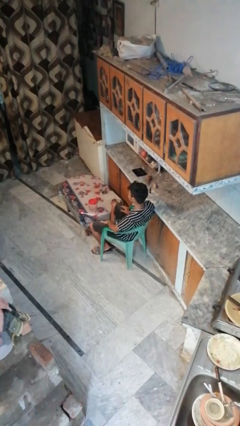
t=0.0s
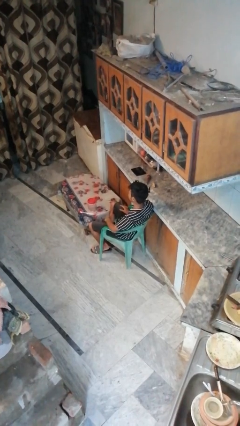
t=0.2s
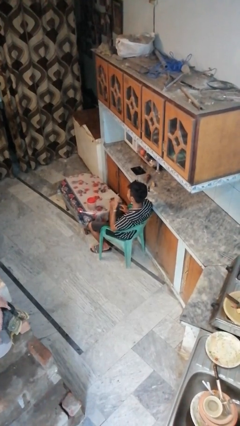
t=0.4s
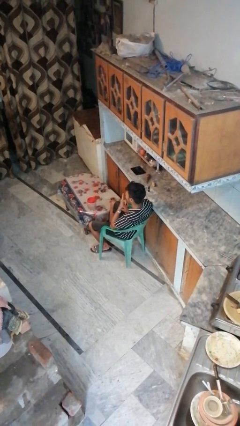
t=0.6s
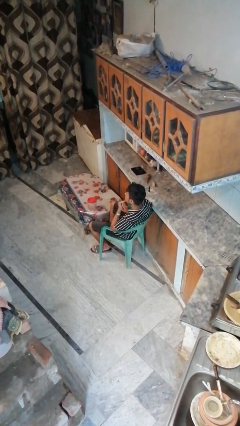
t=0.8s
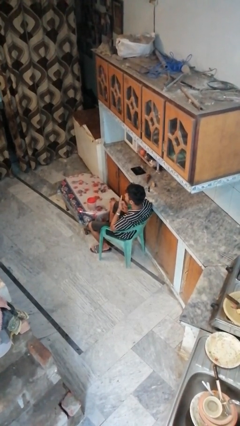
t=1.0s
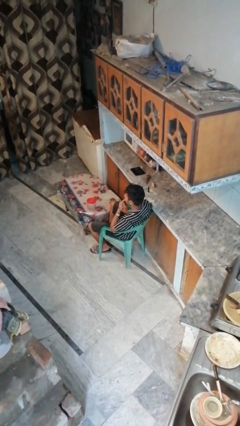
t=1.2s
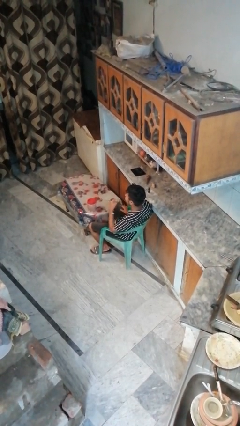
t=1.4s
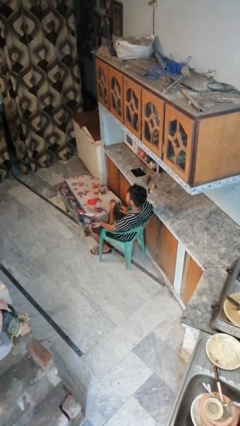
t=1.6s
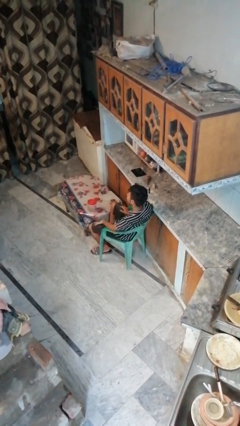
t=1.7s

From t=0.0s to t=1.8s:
person licks fingers

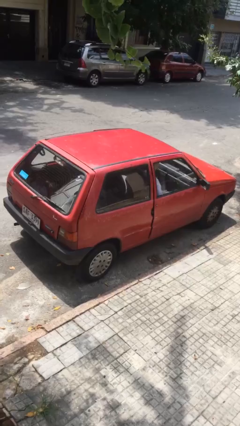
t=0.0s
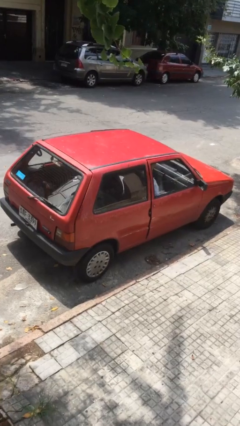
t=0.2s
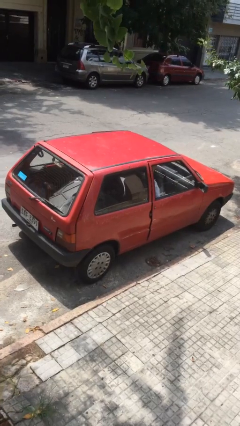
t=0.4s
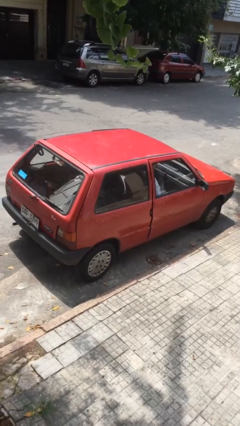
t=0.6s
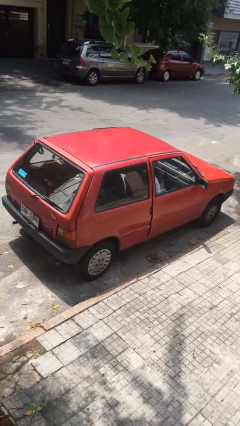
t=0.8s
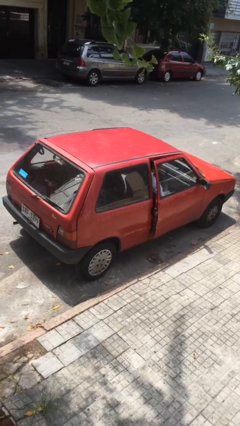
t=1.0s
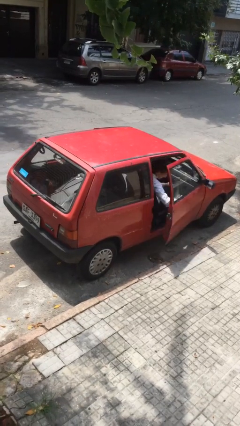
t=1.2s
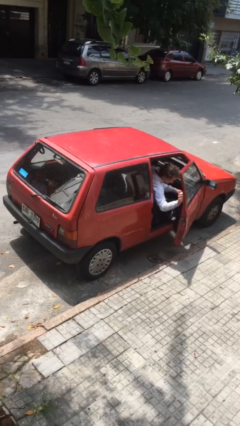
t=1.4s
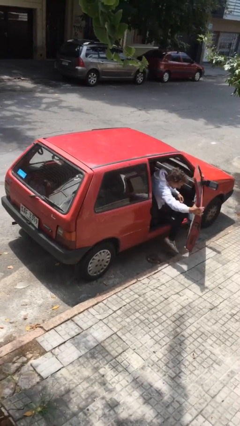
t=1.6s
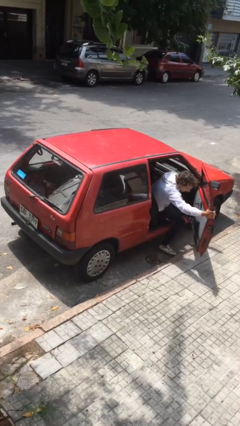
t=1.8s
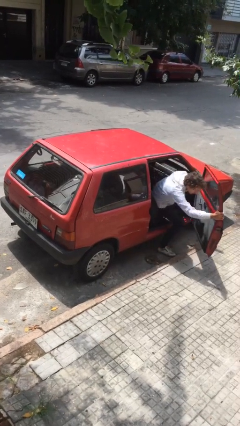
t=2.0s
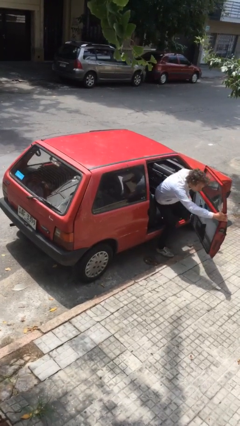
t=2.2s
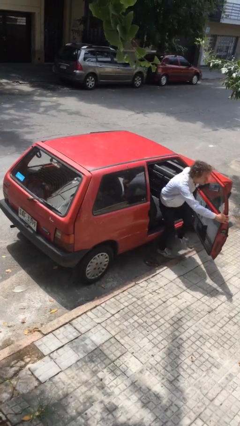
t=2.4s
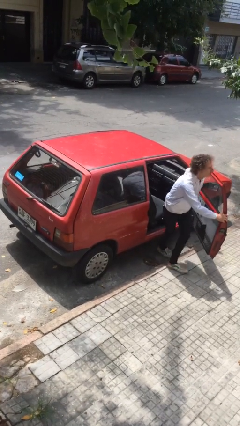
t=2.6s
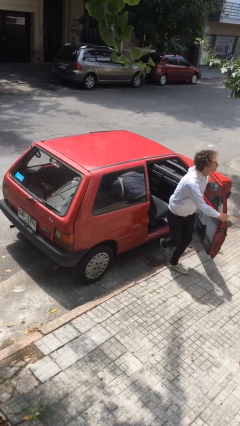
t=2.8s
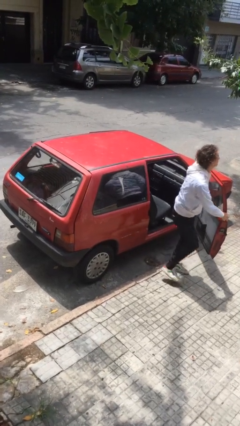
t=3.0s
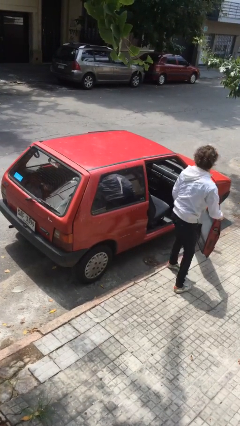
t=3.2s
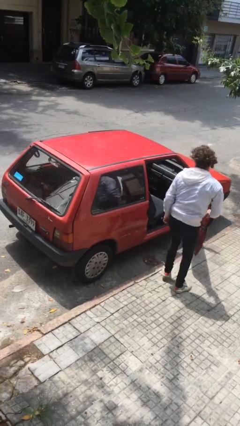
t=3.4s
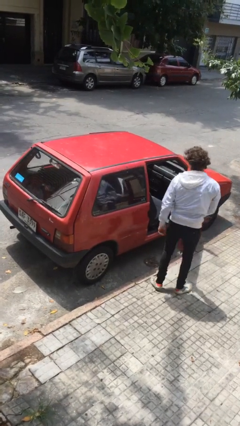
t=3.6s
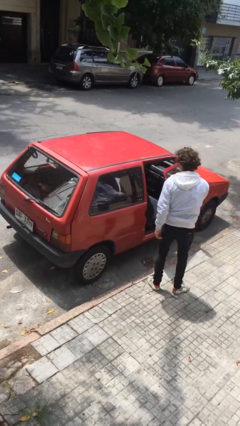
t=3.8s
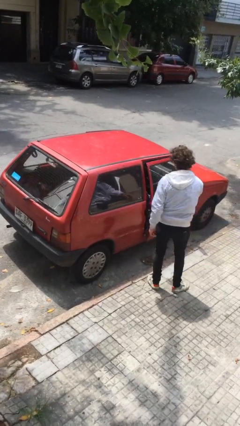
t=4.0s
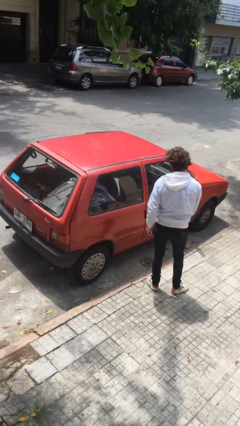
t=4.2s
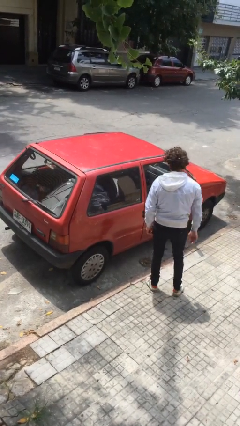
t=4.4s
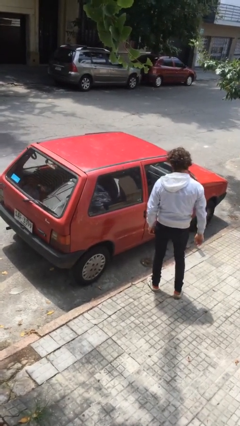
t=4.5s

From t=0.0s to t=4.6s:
car drops off person

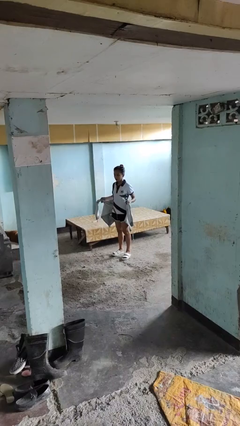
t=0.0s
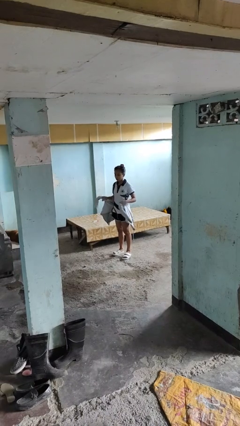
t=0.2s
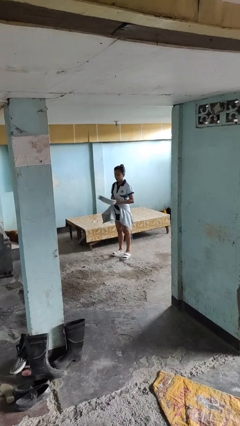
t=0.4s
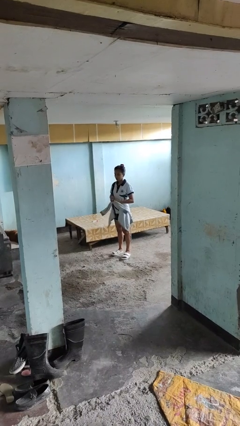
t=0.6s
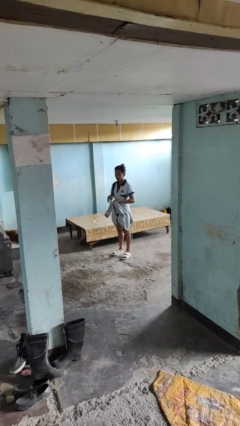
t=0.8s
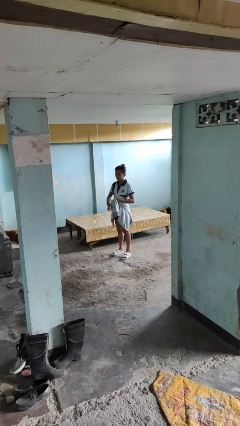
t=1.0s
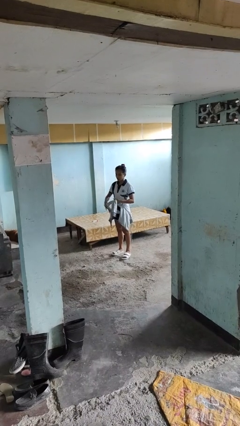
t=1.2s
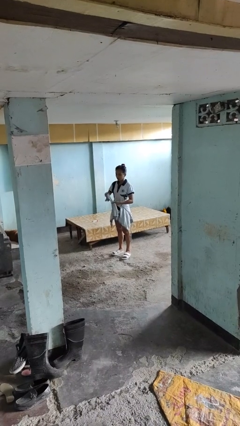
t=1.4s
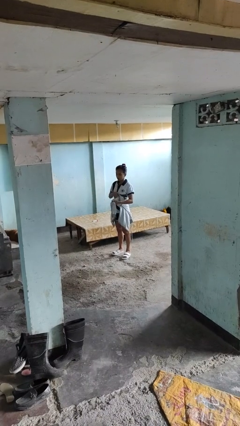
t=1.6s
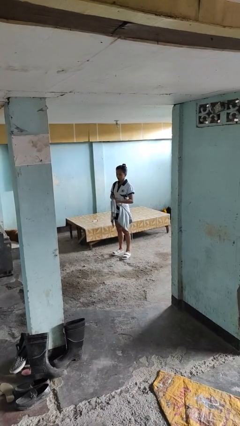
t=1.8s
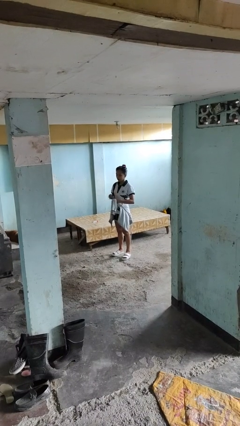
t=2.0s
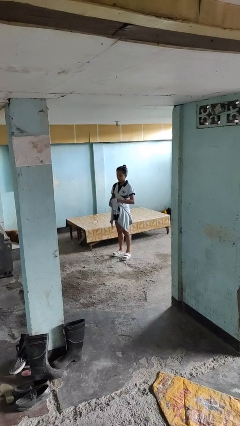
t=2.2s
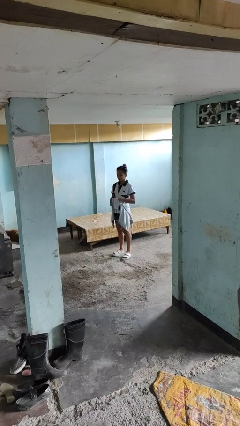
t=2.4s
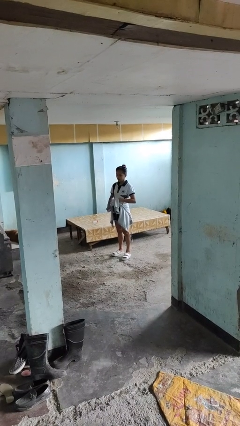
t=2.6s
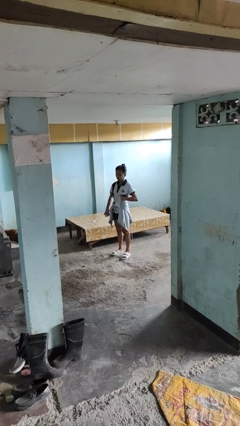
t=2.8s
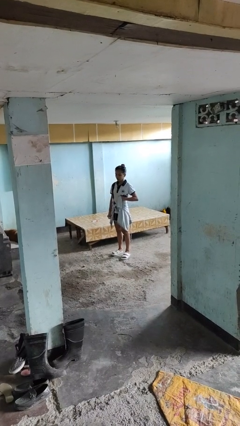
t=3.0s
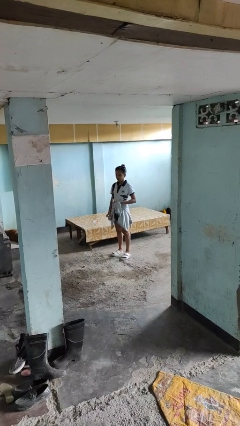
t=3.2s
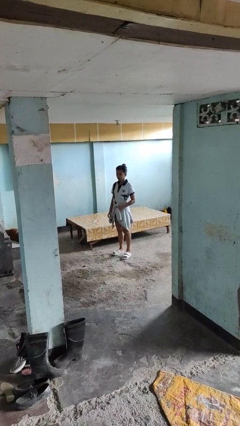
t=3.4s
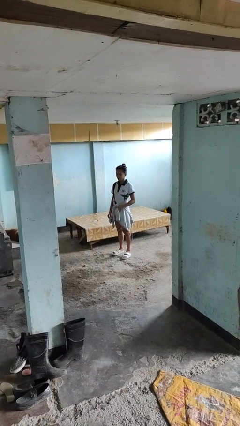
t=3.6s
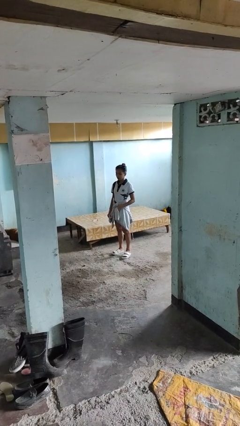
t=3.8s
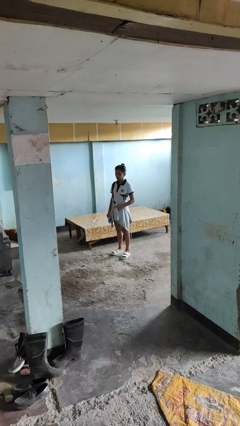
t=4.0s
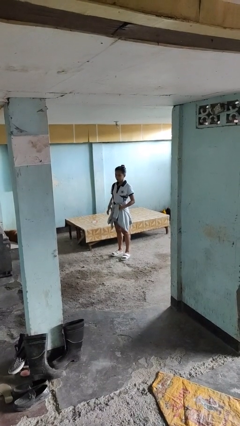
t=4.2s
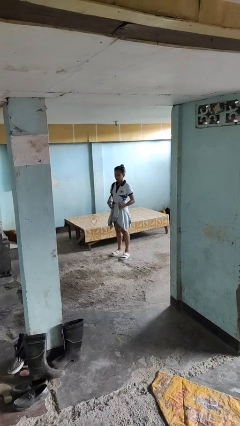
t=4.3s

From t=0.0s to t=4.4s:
person ties jacket around waist

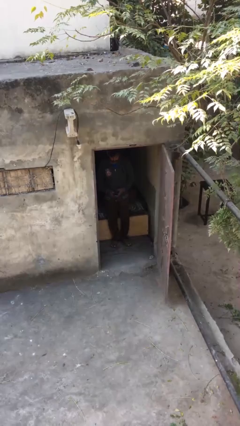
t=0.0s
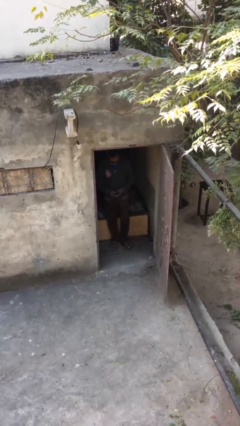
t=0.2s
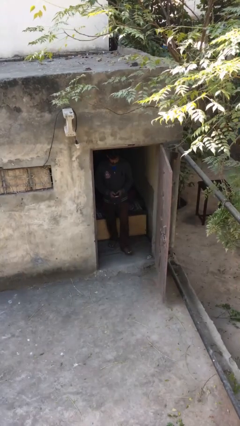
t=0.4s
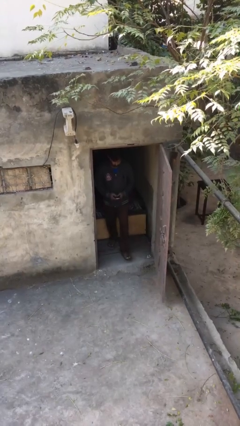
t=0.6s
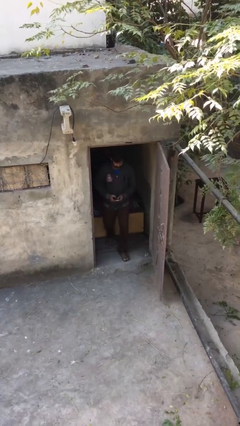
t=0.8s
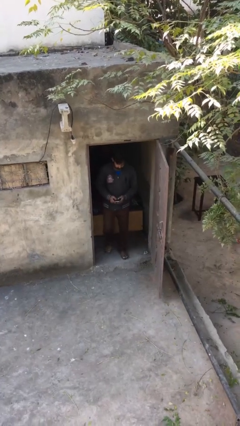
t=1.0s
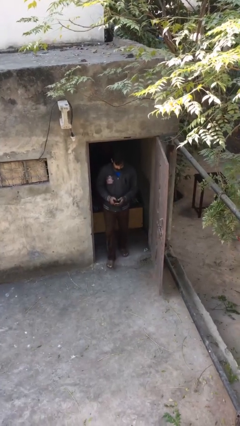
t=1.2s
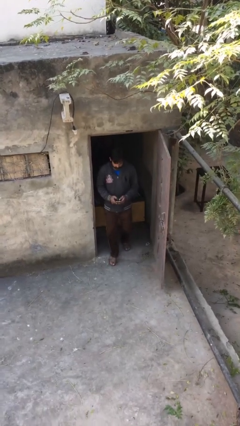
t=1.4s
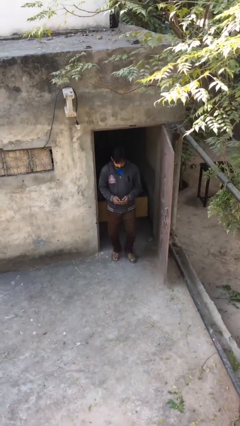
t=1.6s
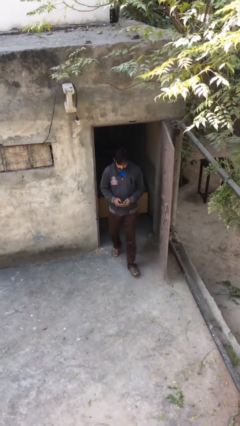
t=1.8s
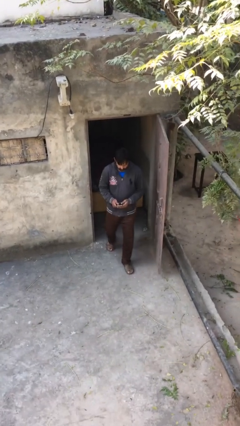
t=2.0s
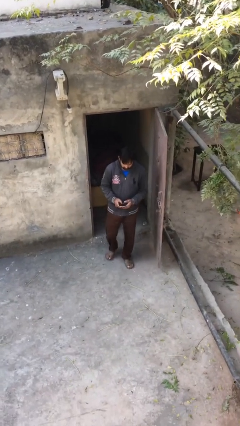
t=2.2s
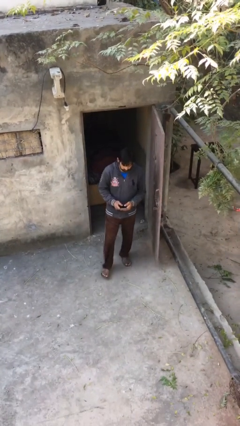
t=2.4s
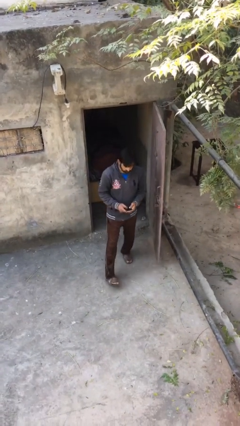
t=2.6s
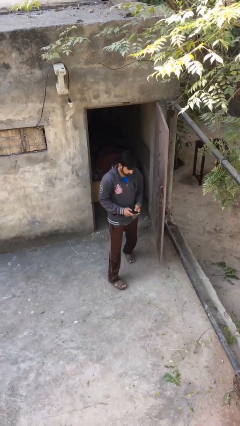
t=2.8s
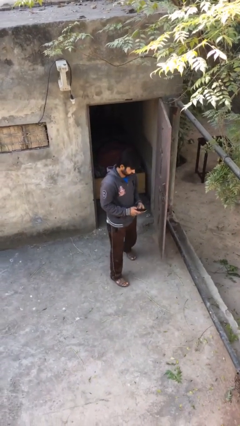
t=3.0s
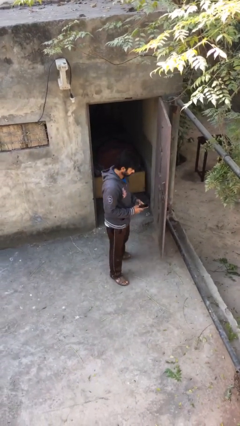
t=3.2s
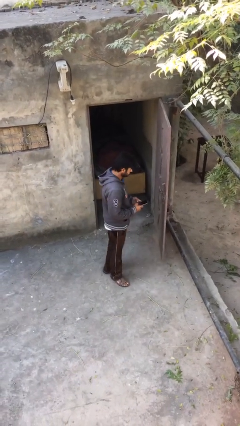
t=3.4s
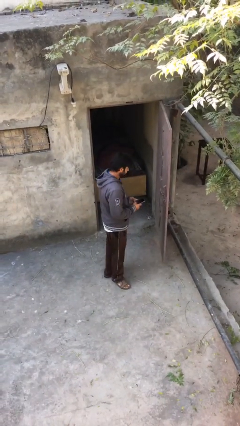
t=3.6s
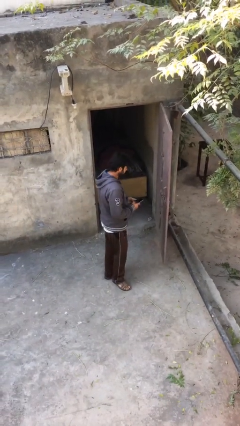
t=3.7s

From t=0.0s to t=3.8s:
person enters scene through structure

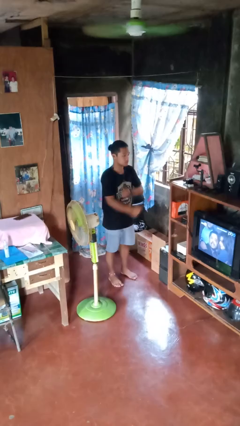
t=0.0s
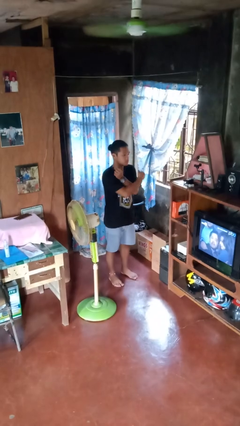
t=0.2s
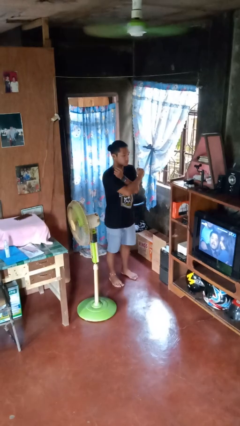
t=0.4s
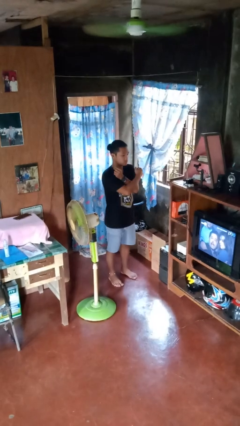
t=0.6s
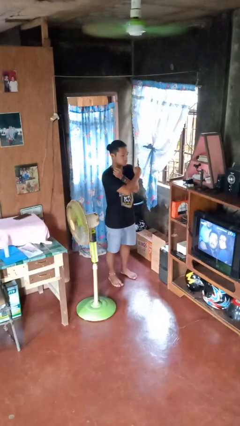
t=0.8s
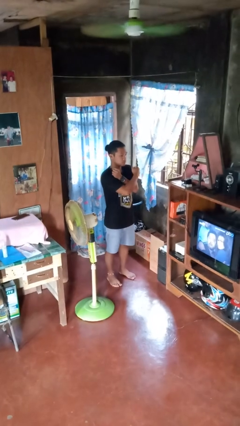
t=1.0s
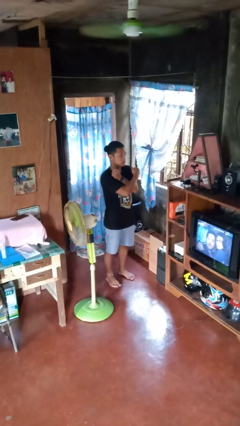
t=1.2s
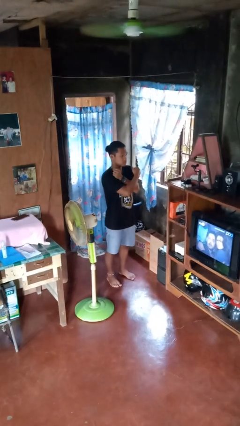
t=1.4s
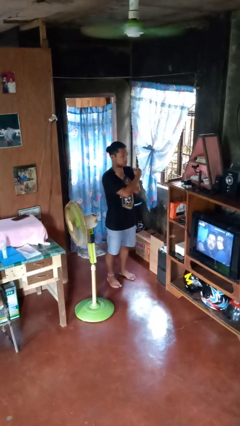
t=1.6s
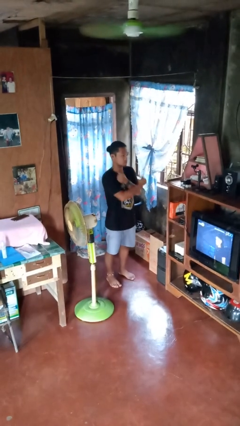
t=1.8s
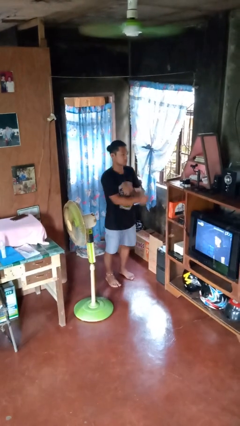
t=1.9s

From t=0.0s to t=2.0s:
person gestures arms x

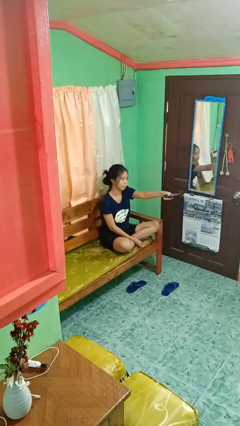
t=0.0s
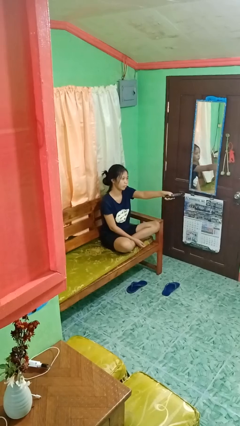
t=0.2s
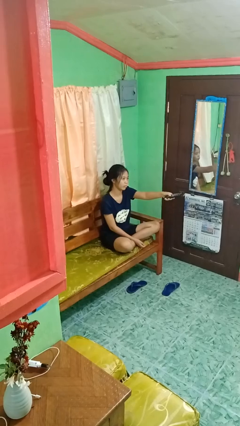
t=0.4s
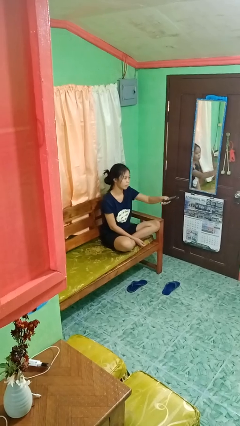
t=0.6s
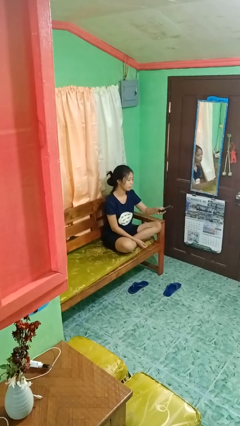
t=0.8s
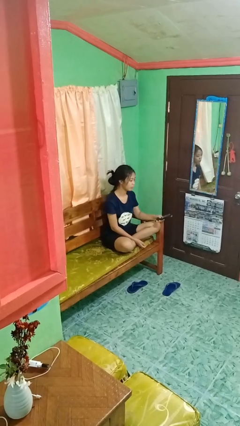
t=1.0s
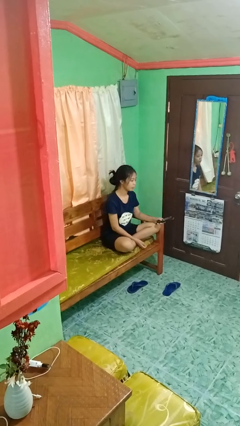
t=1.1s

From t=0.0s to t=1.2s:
person uses television remote
